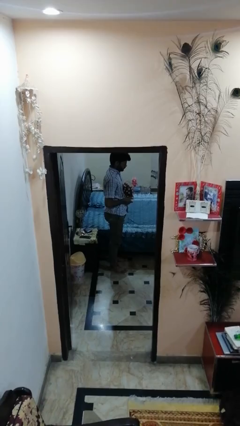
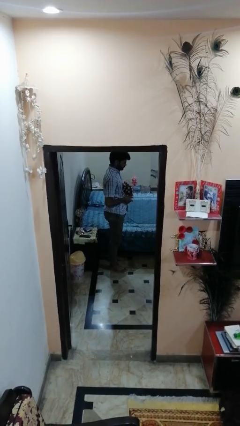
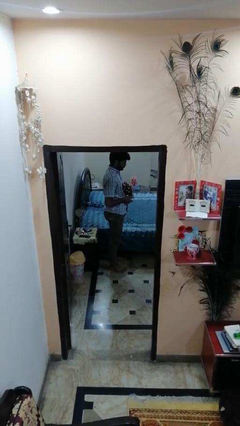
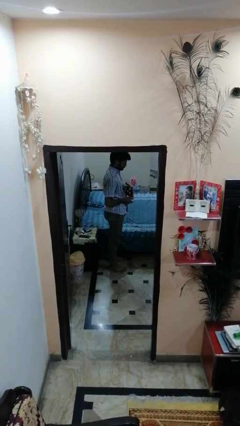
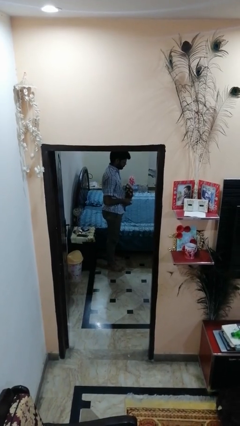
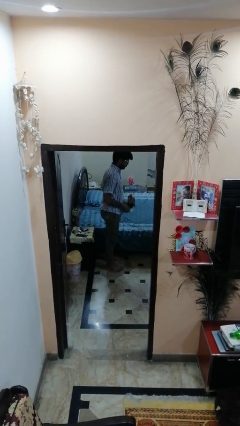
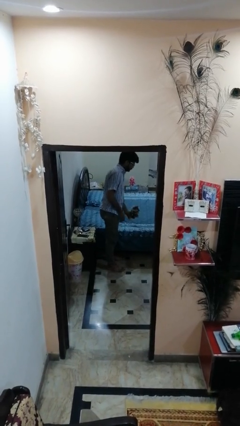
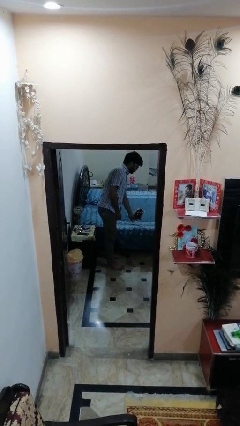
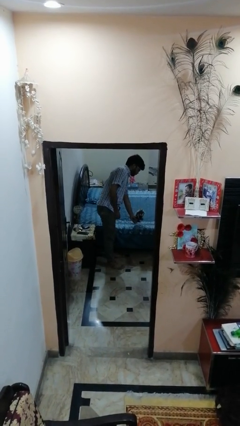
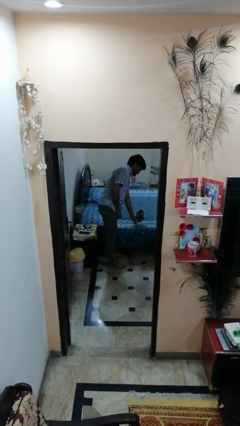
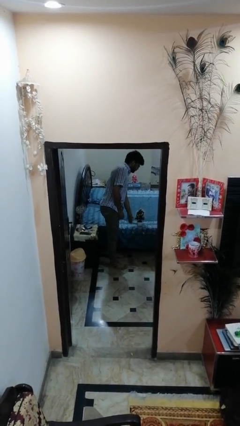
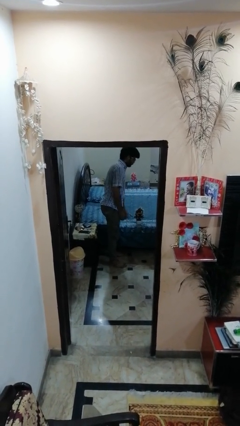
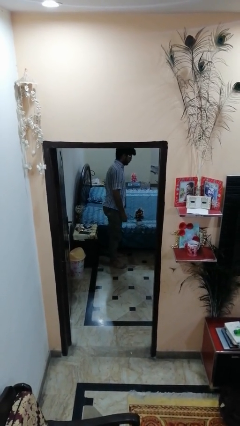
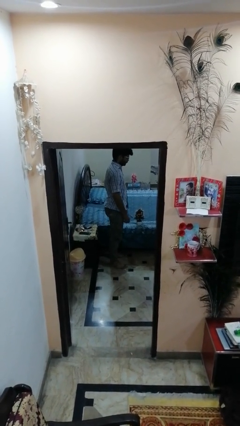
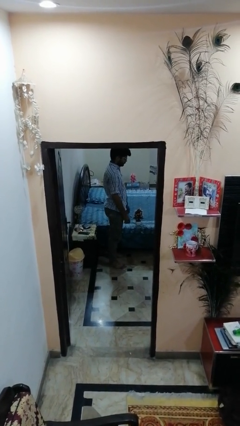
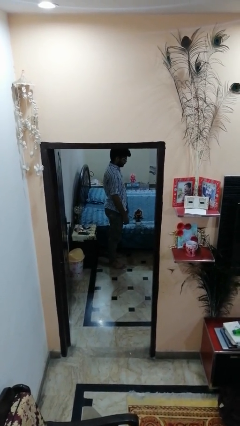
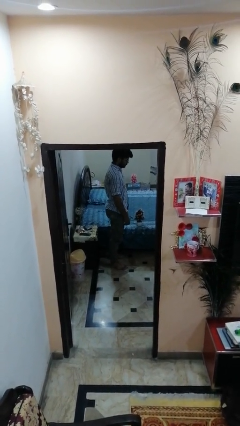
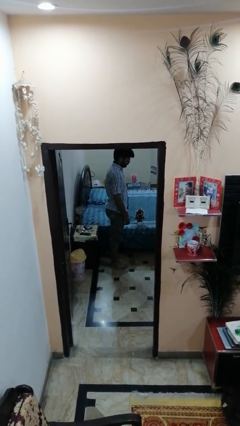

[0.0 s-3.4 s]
person puts down object on bed

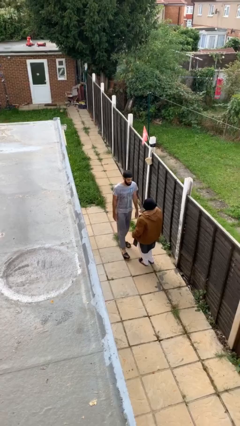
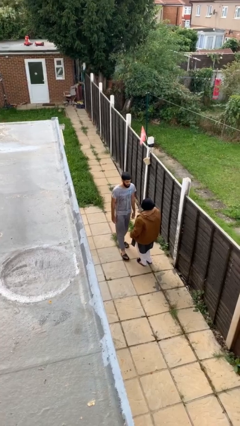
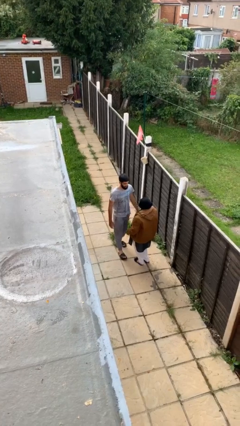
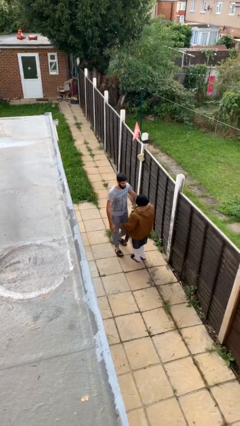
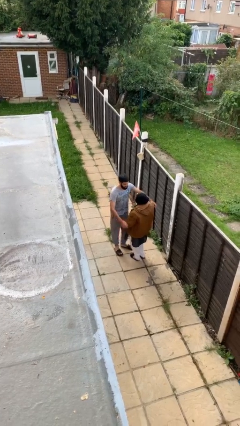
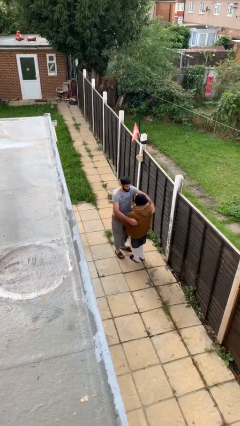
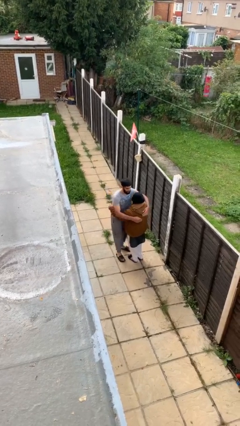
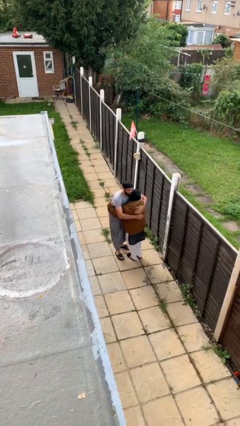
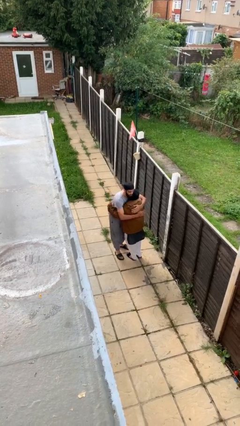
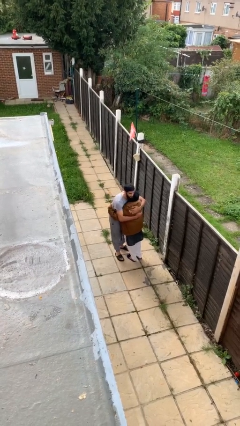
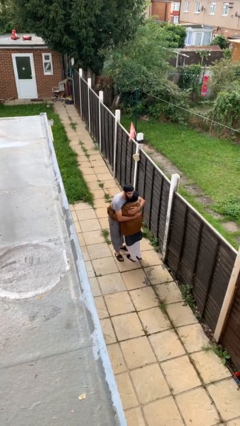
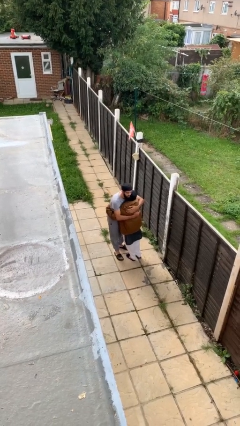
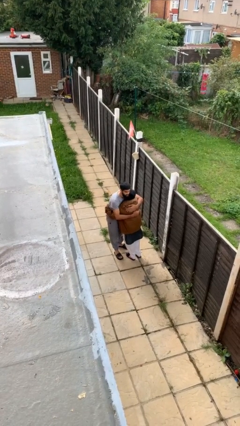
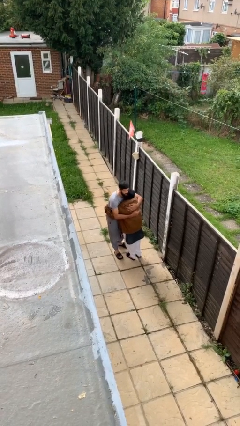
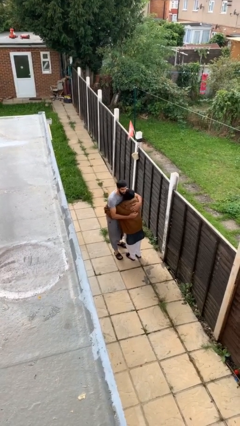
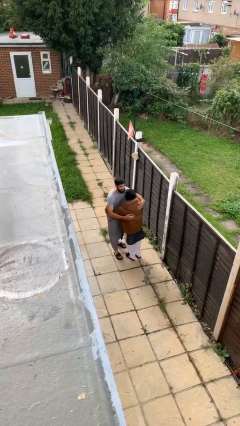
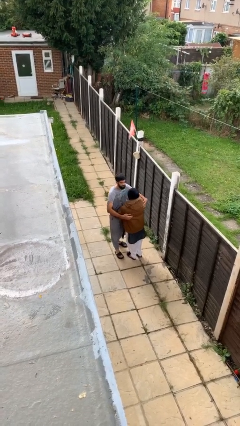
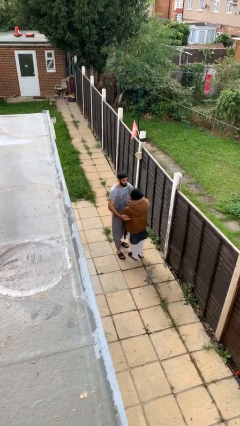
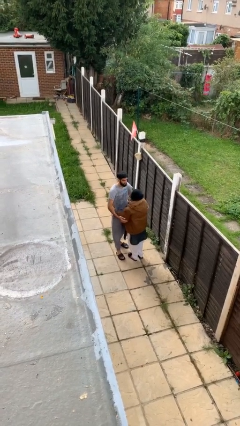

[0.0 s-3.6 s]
person embraces person

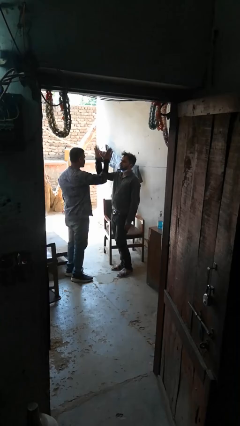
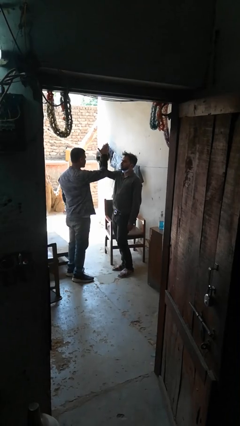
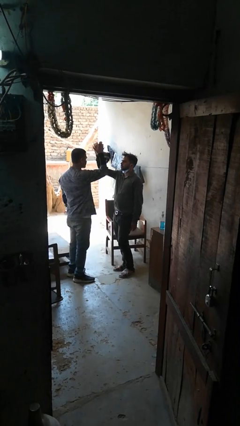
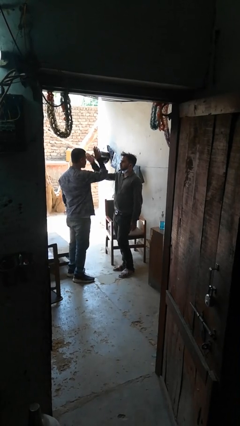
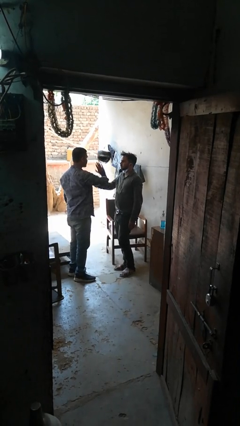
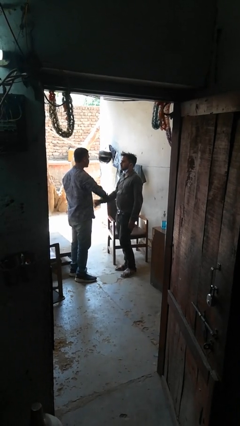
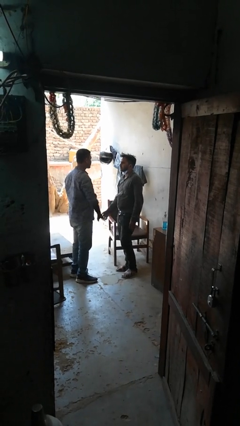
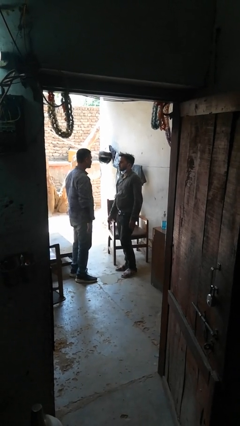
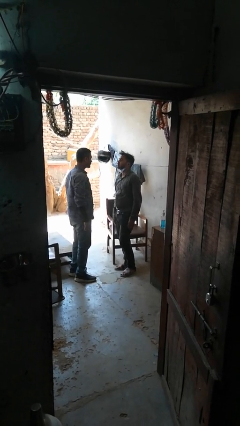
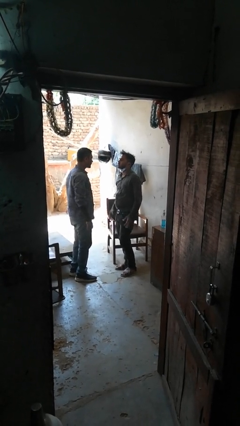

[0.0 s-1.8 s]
person highfives hand

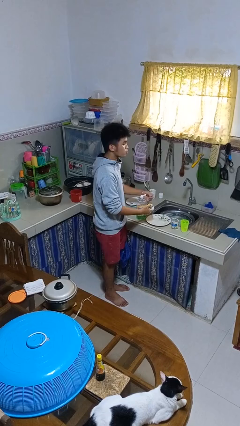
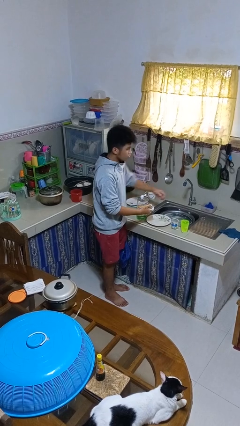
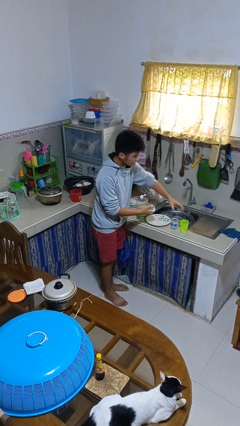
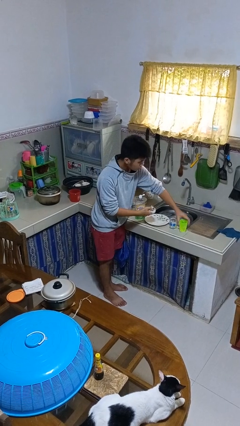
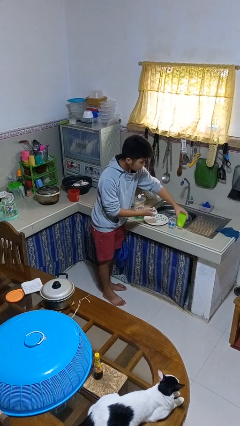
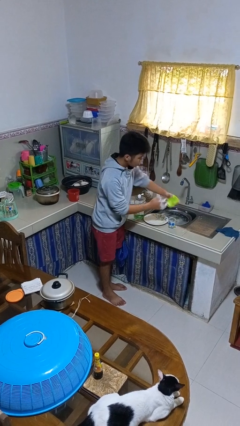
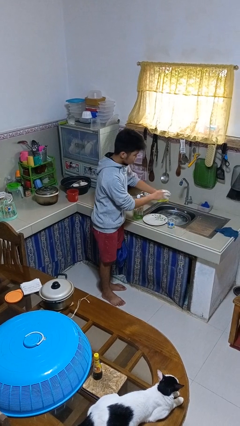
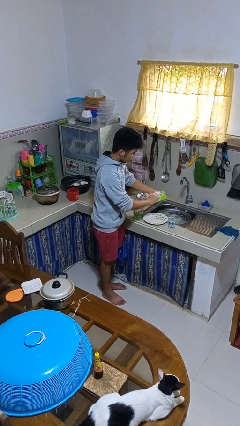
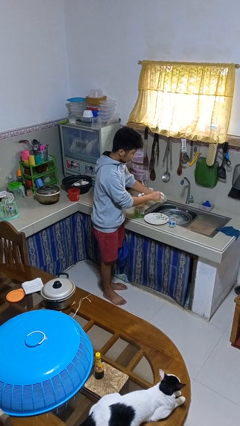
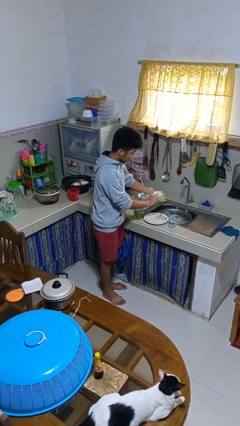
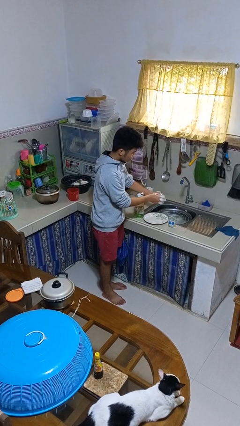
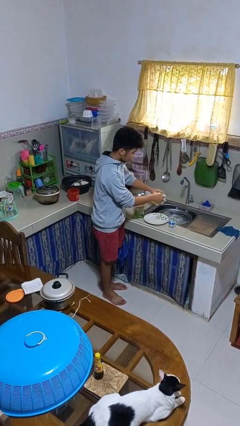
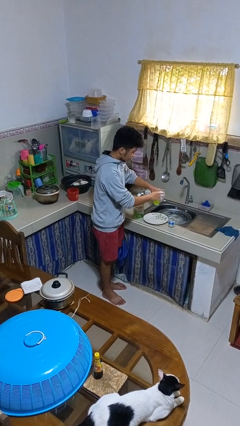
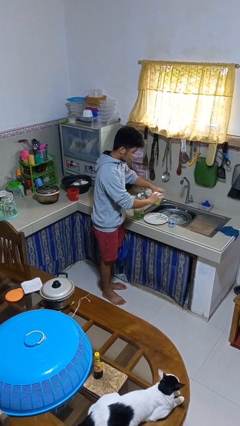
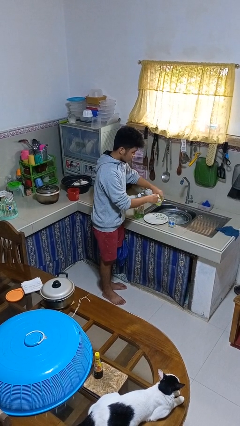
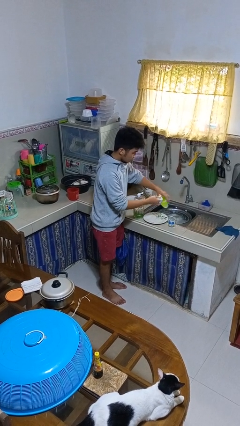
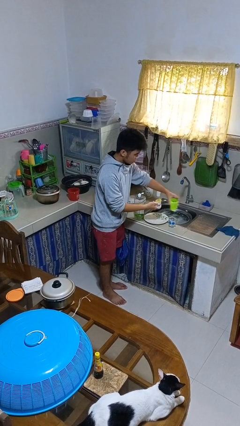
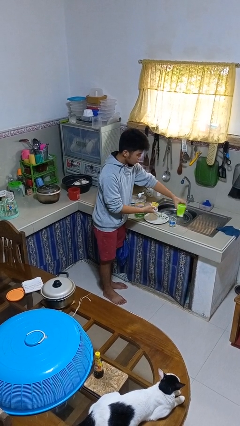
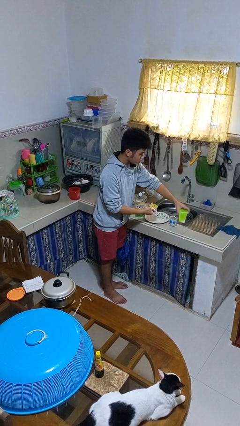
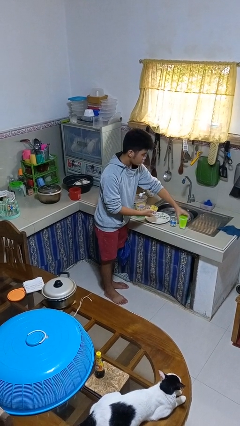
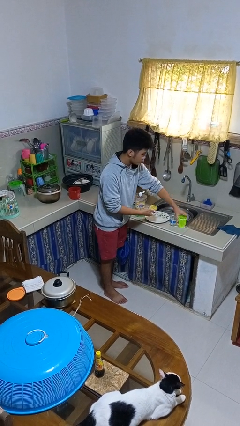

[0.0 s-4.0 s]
person washes dish

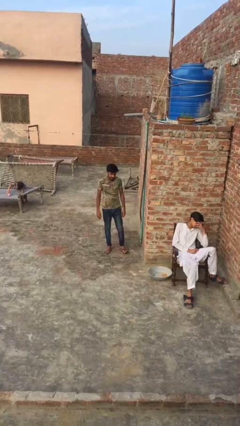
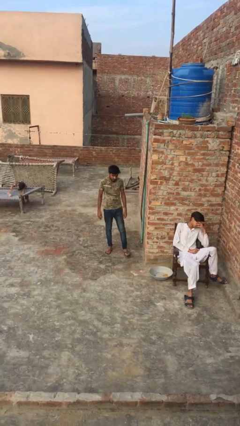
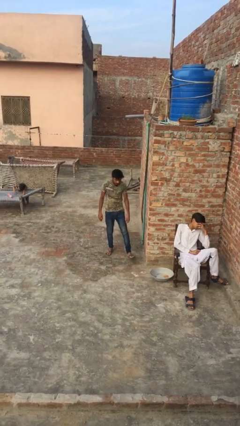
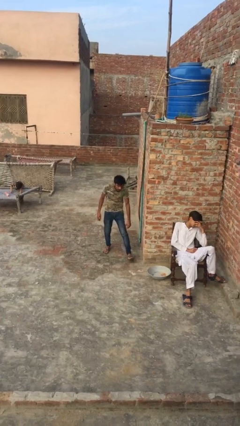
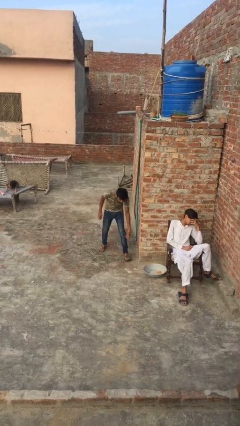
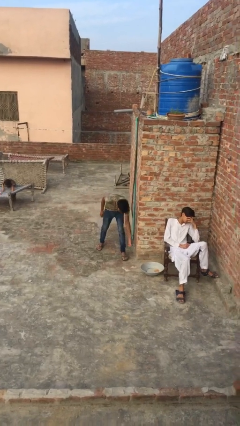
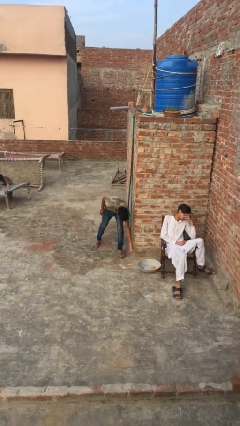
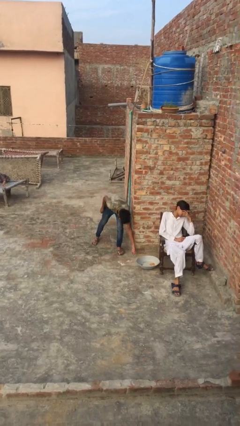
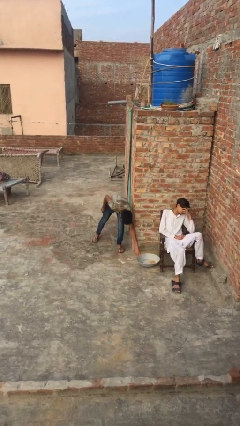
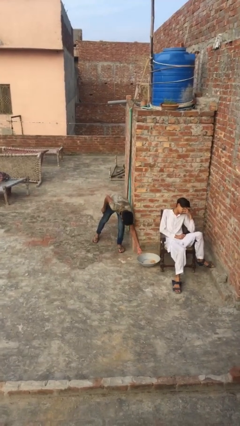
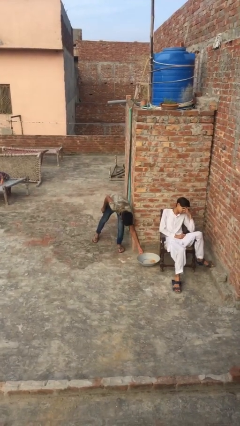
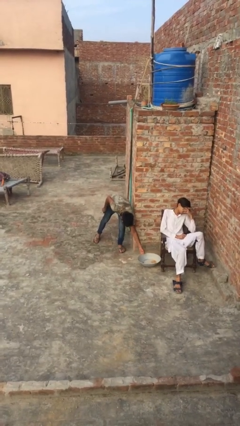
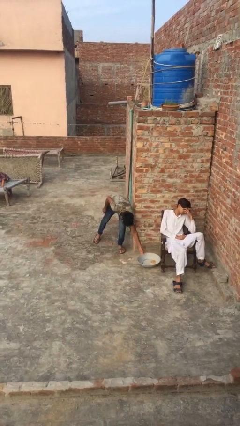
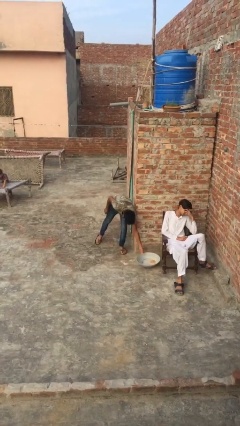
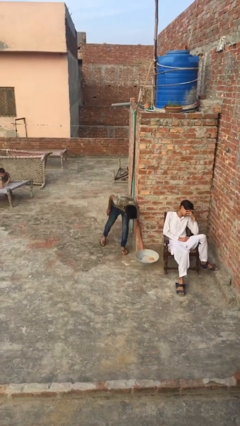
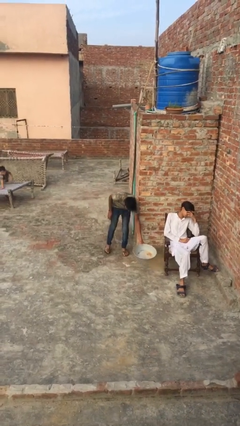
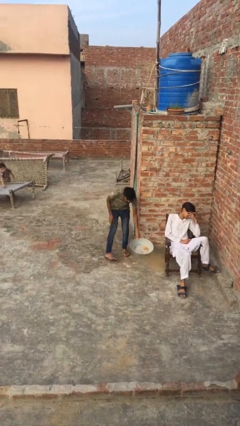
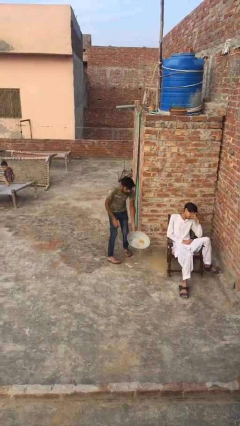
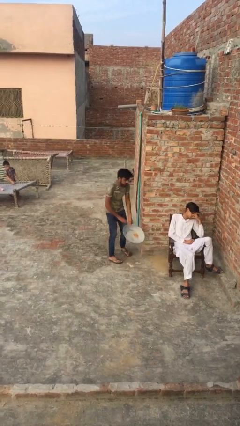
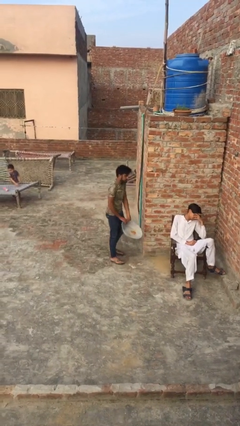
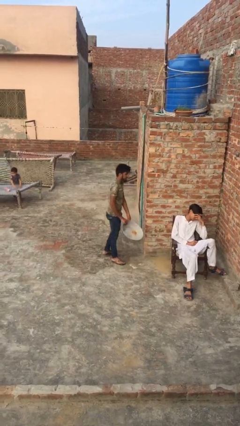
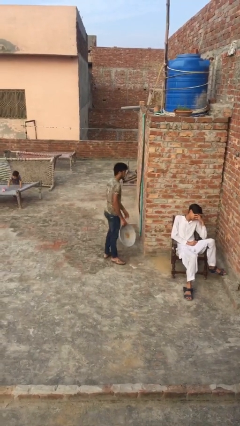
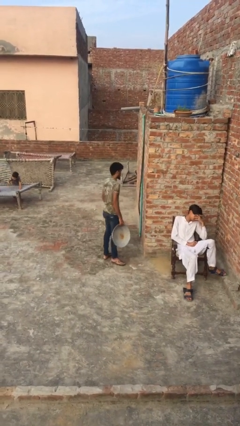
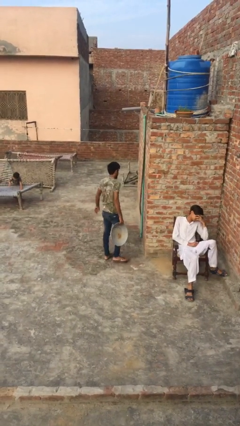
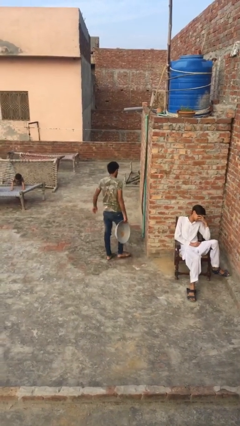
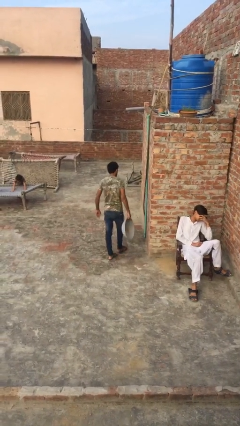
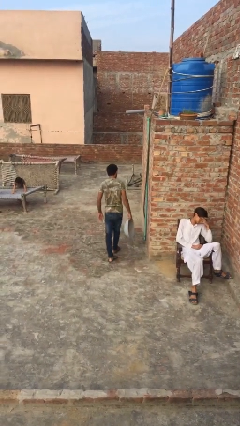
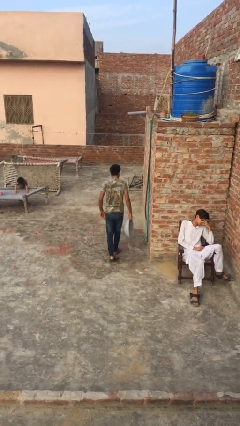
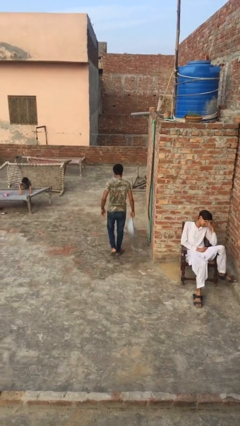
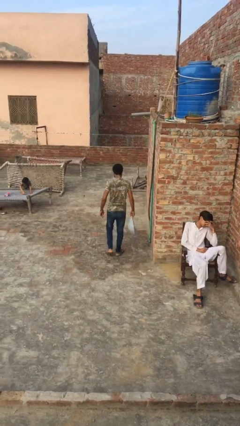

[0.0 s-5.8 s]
person steals object from person
